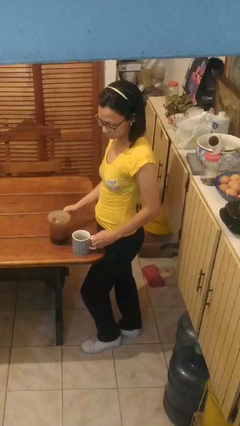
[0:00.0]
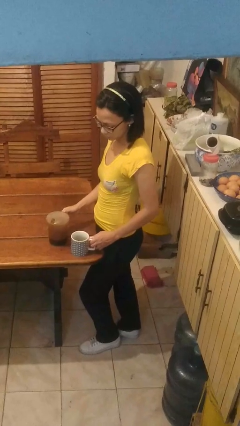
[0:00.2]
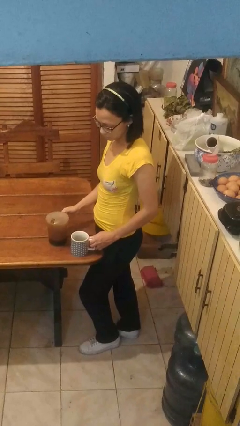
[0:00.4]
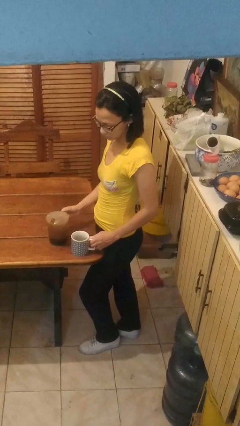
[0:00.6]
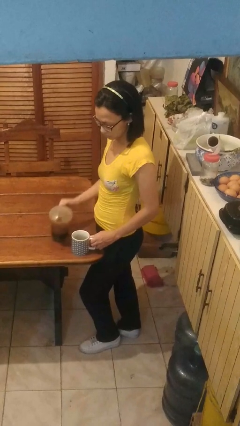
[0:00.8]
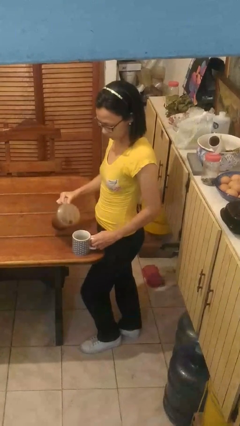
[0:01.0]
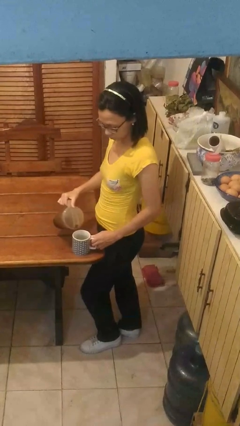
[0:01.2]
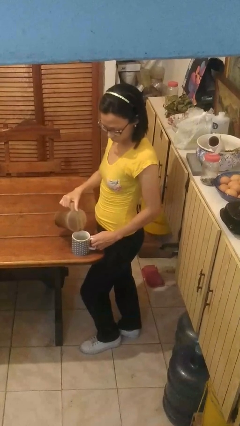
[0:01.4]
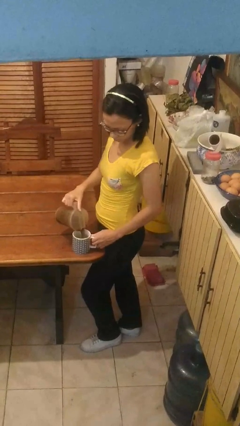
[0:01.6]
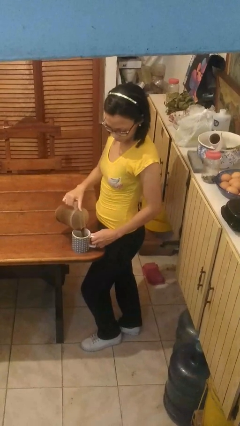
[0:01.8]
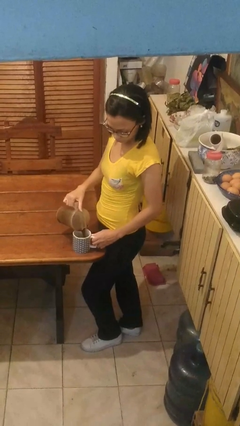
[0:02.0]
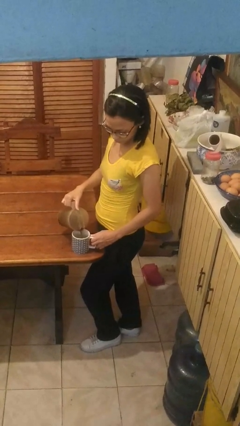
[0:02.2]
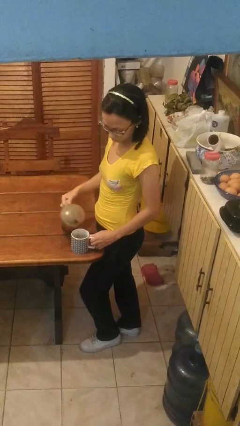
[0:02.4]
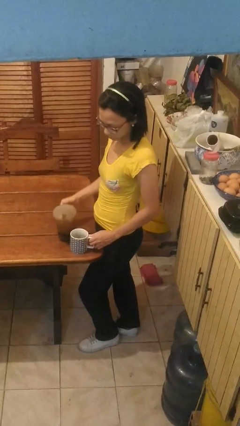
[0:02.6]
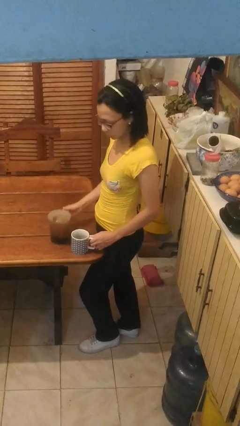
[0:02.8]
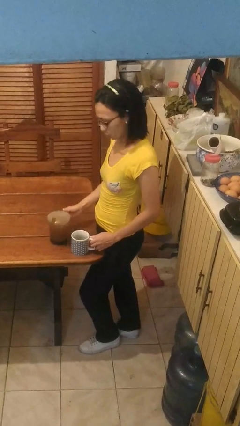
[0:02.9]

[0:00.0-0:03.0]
person pours coffee into mug

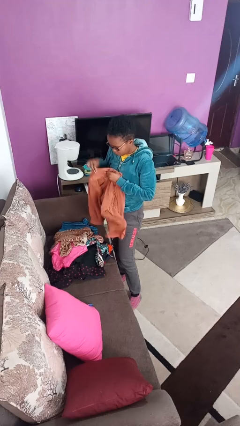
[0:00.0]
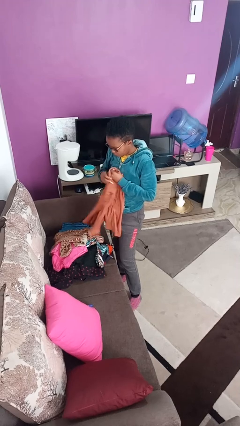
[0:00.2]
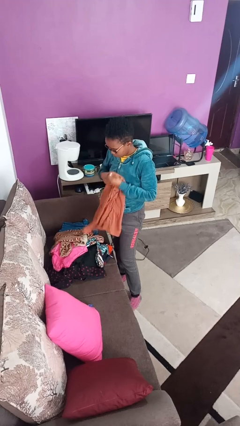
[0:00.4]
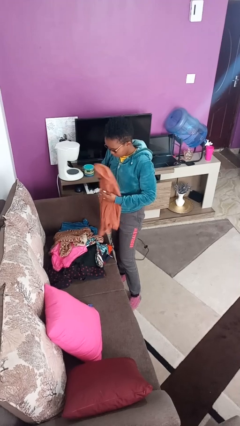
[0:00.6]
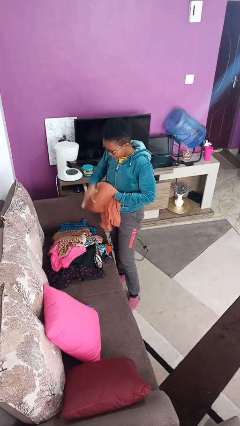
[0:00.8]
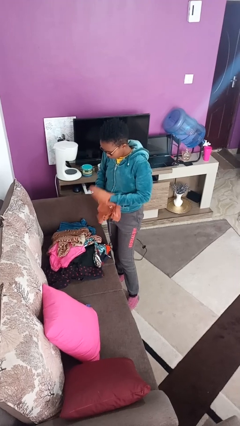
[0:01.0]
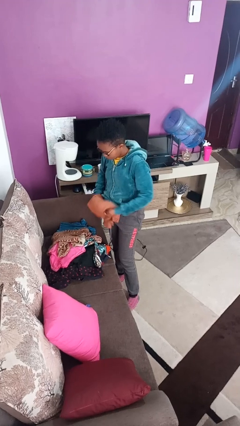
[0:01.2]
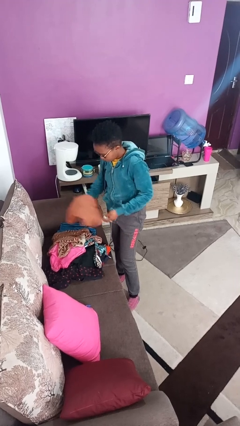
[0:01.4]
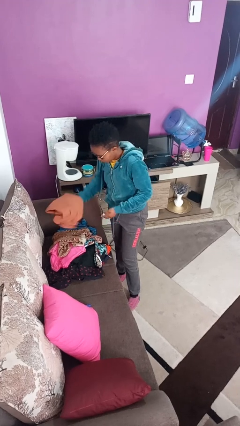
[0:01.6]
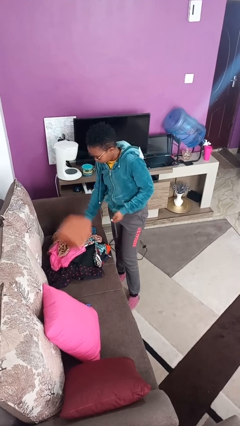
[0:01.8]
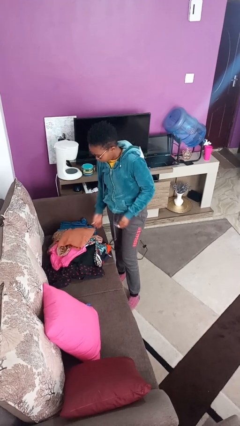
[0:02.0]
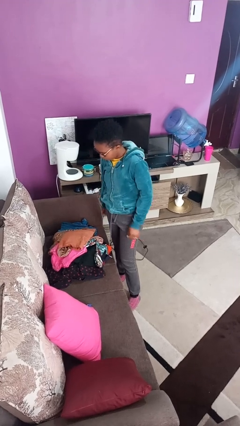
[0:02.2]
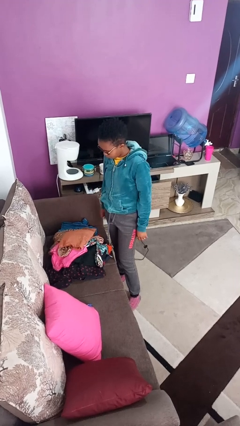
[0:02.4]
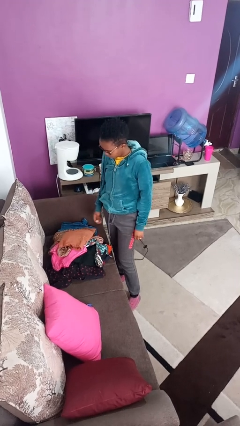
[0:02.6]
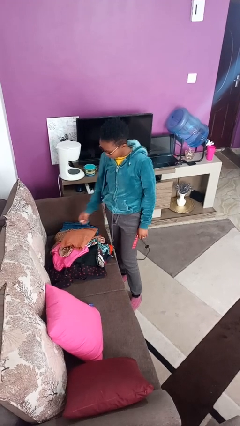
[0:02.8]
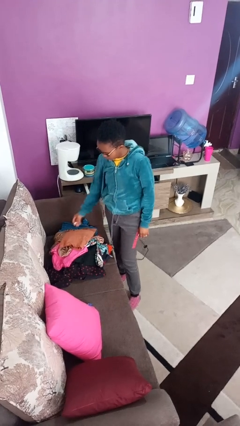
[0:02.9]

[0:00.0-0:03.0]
person folds shirt

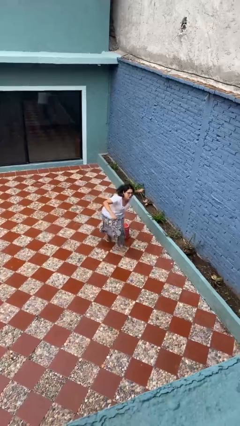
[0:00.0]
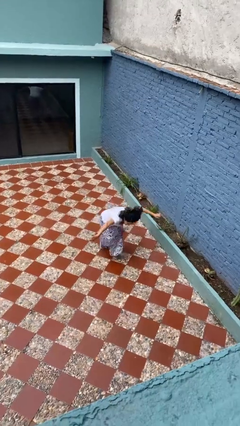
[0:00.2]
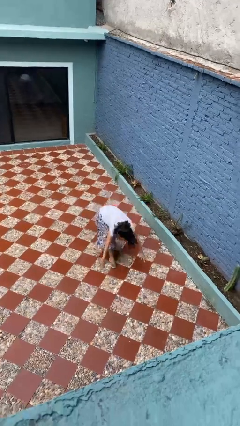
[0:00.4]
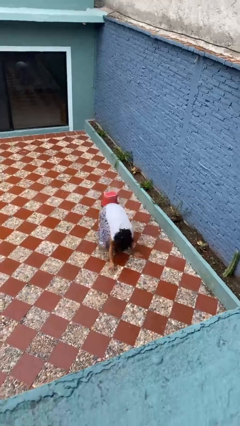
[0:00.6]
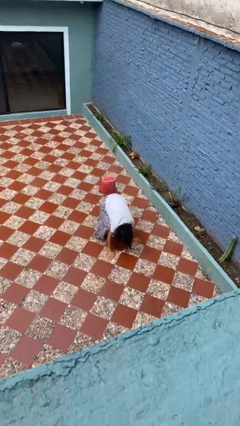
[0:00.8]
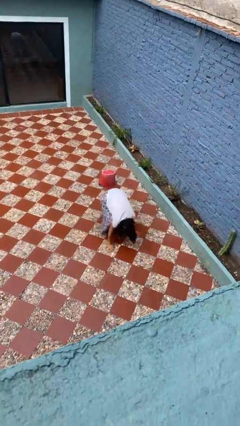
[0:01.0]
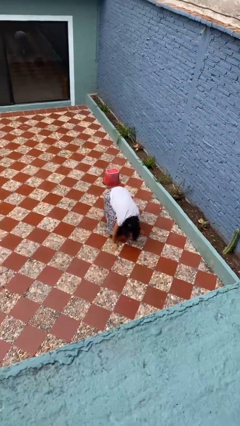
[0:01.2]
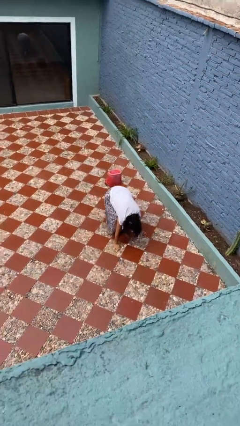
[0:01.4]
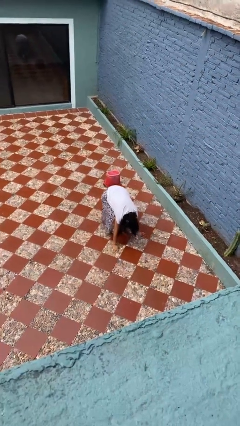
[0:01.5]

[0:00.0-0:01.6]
person trips on object on floor

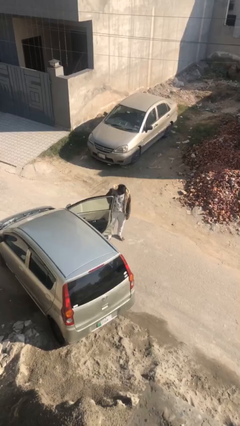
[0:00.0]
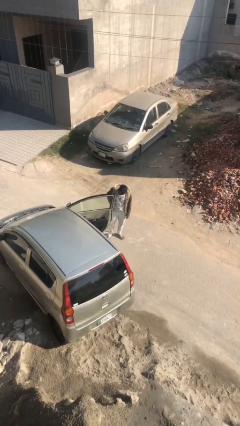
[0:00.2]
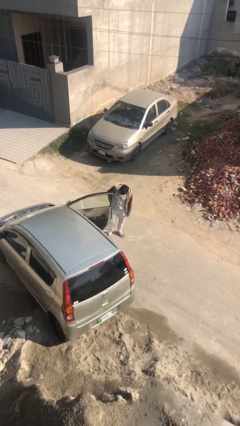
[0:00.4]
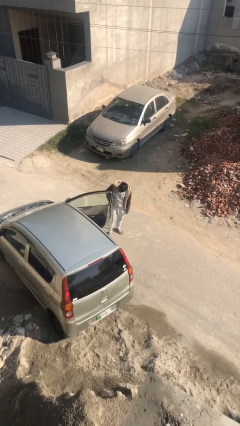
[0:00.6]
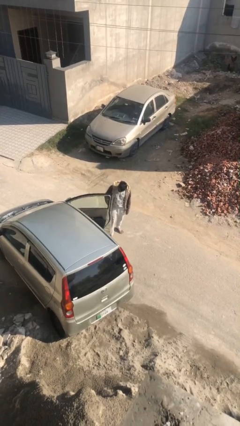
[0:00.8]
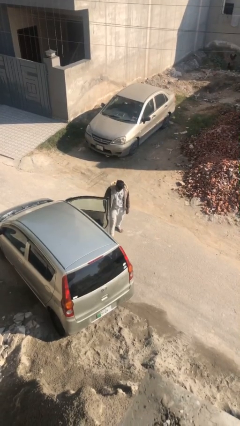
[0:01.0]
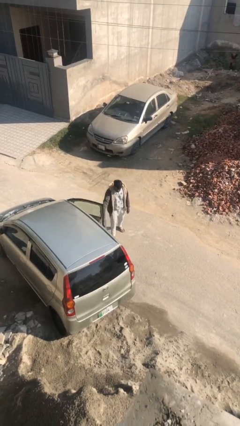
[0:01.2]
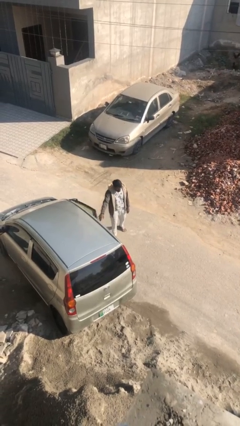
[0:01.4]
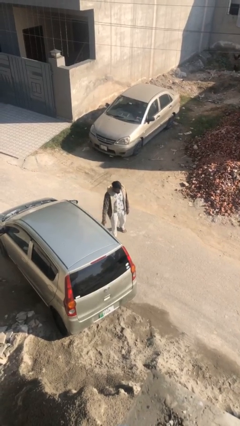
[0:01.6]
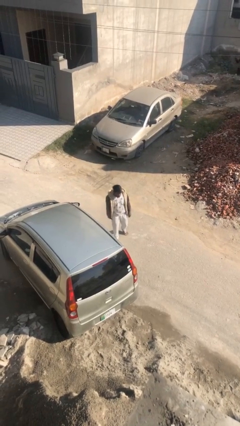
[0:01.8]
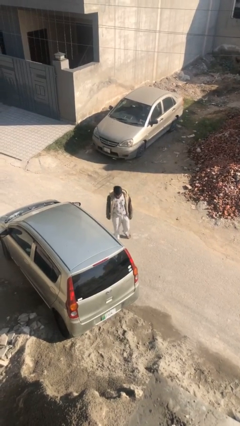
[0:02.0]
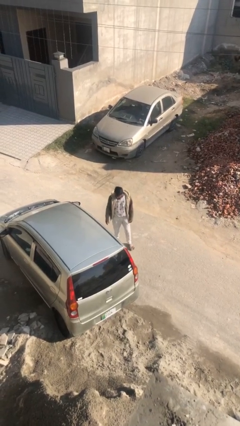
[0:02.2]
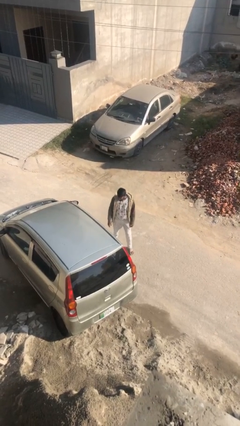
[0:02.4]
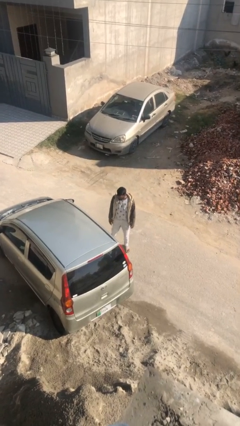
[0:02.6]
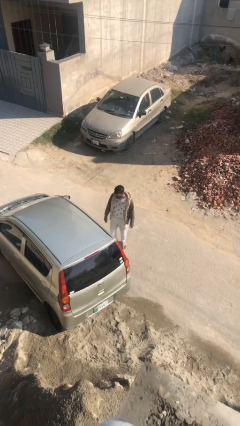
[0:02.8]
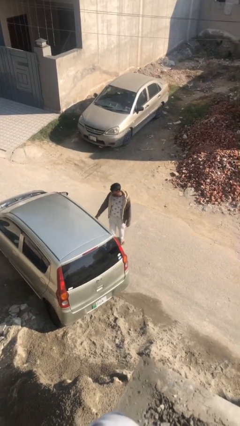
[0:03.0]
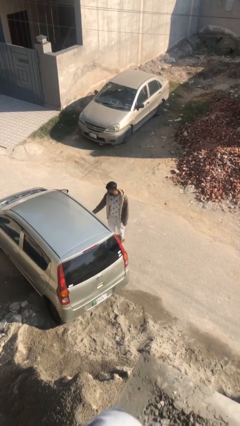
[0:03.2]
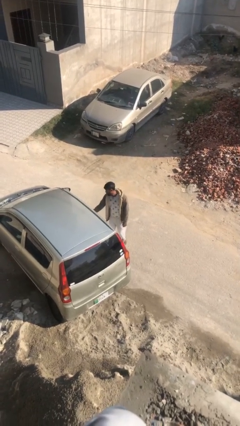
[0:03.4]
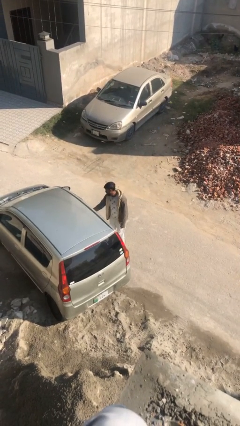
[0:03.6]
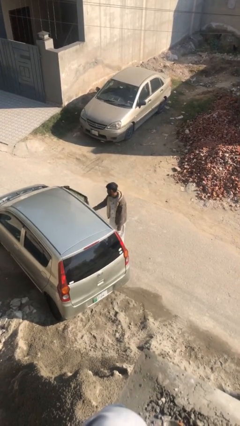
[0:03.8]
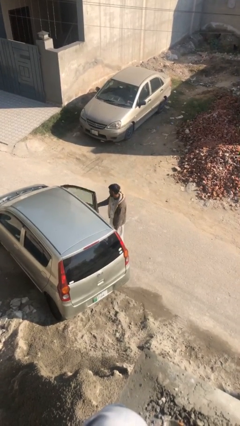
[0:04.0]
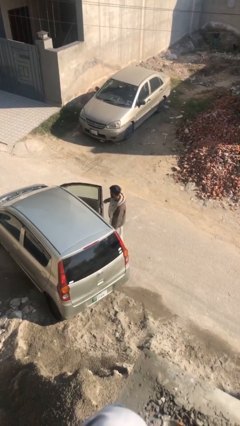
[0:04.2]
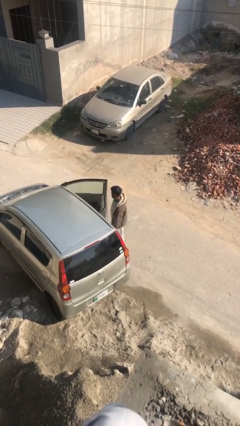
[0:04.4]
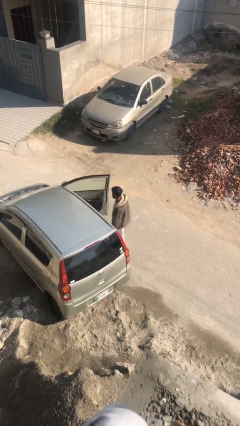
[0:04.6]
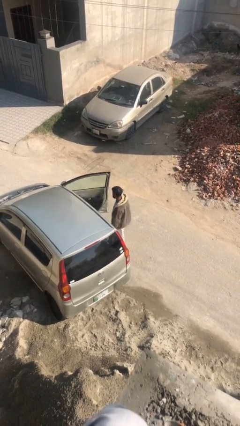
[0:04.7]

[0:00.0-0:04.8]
person closes car door

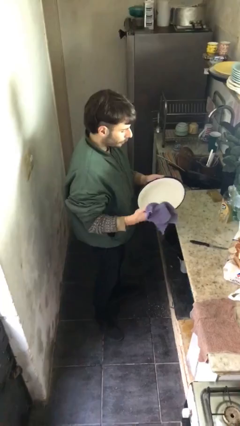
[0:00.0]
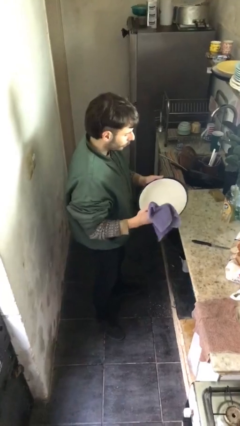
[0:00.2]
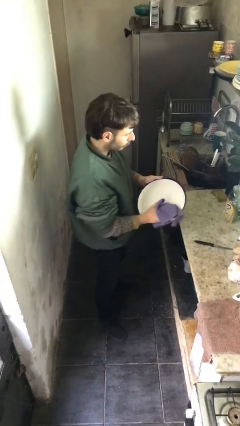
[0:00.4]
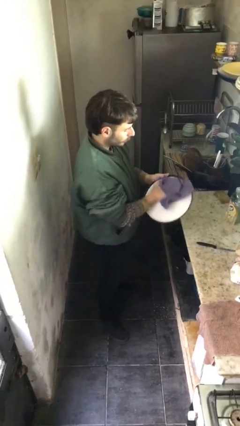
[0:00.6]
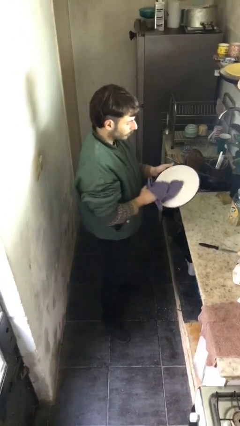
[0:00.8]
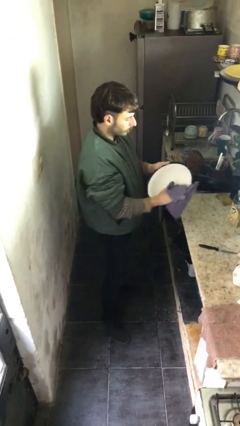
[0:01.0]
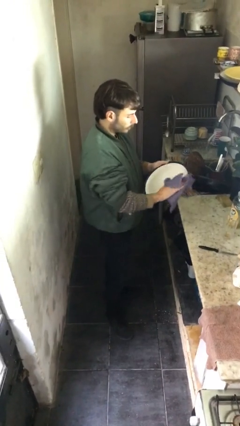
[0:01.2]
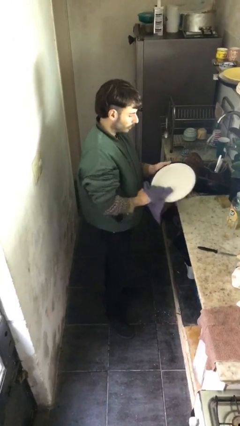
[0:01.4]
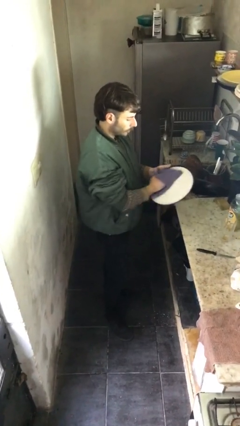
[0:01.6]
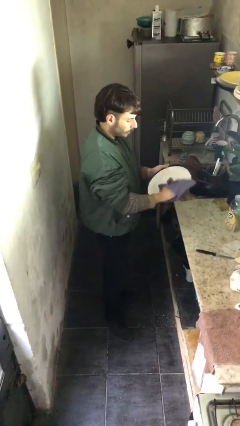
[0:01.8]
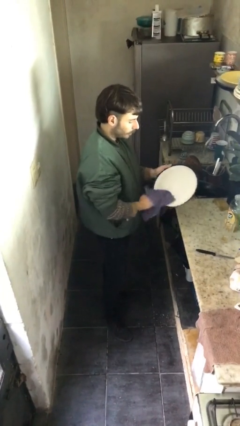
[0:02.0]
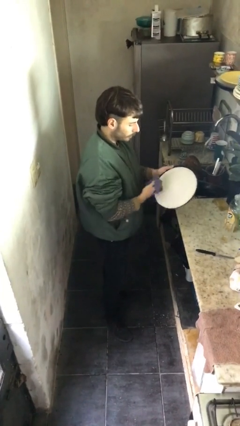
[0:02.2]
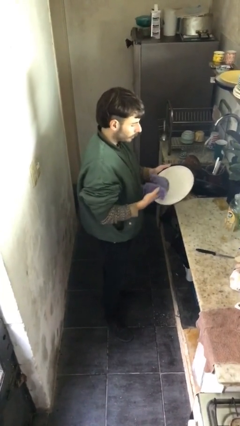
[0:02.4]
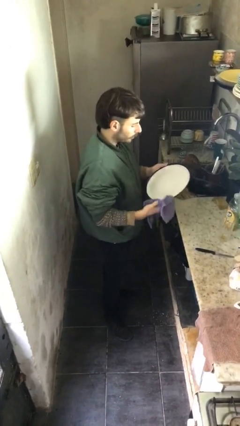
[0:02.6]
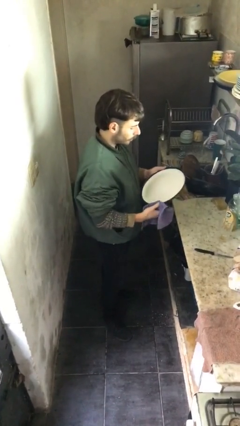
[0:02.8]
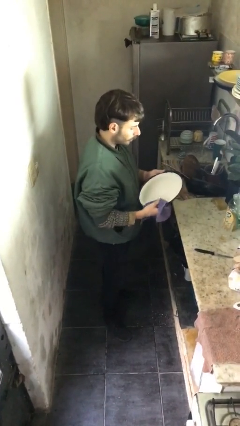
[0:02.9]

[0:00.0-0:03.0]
person dries dish

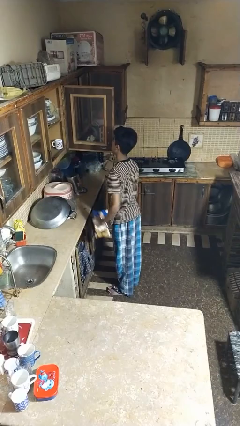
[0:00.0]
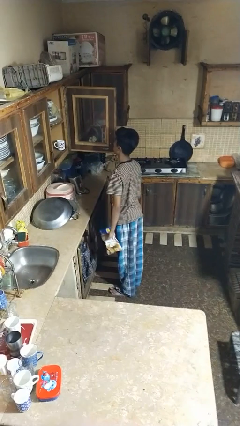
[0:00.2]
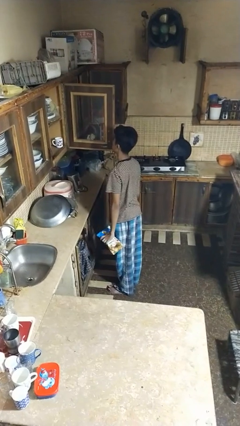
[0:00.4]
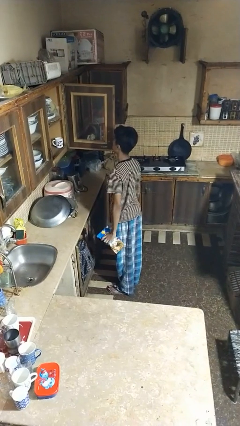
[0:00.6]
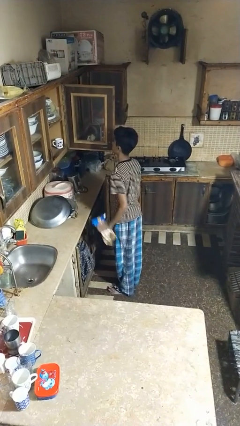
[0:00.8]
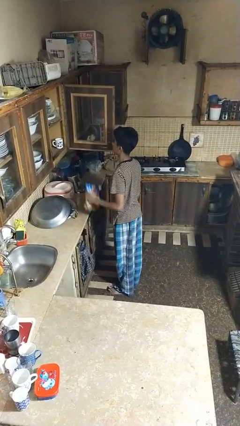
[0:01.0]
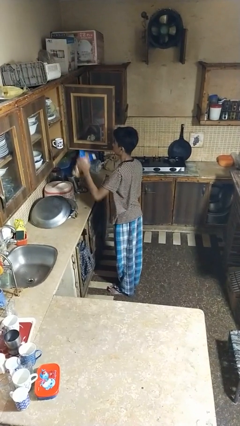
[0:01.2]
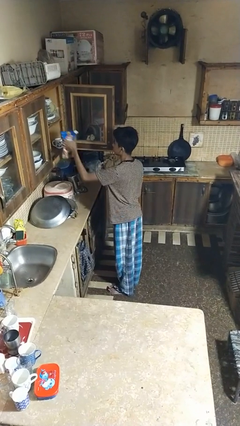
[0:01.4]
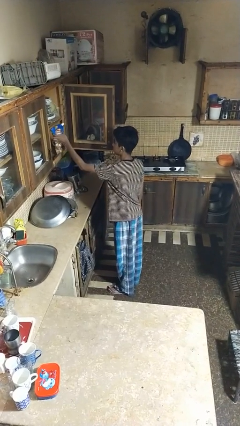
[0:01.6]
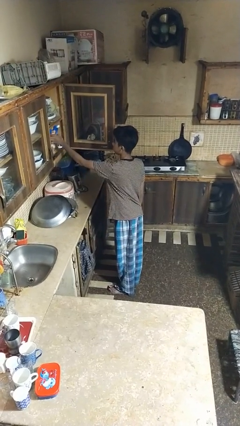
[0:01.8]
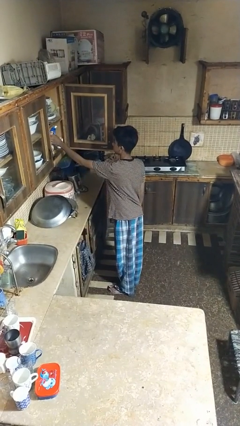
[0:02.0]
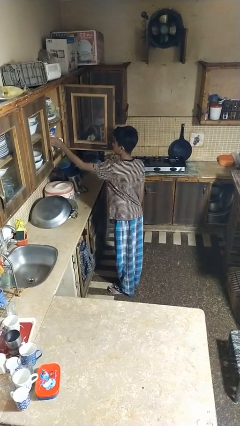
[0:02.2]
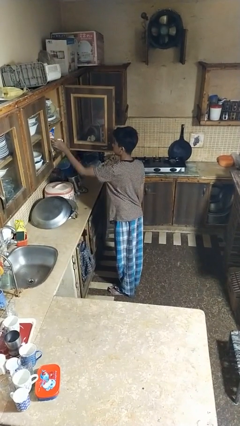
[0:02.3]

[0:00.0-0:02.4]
person puts object in cabinet
